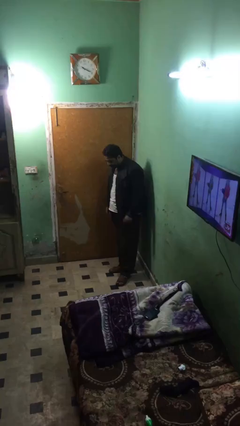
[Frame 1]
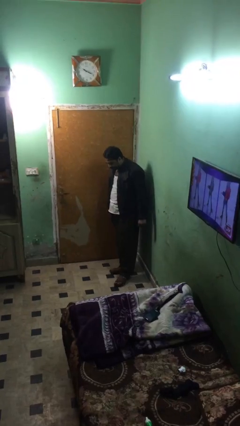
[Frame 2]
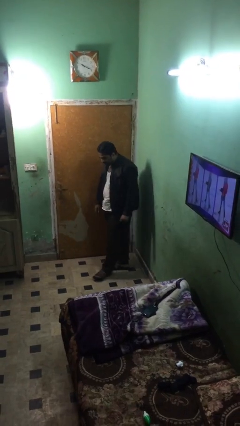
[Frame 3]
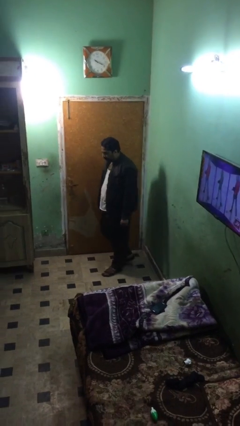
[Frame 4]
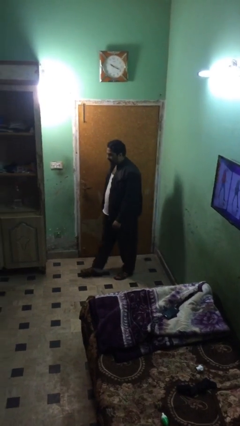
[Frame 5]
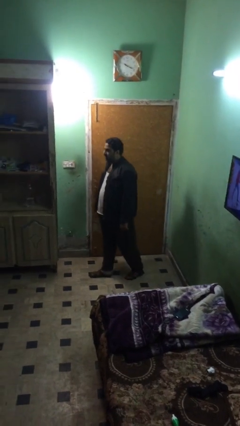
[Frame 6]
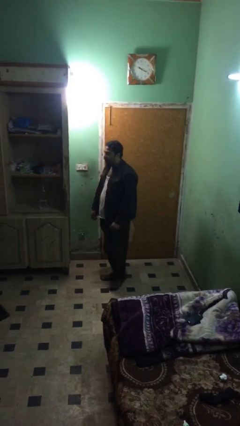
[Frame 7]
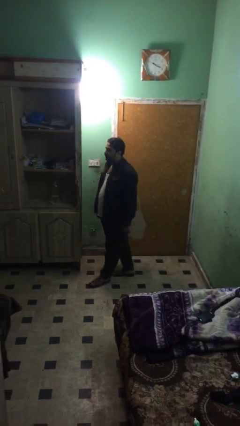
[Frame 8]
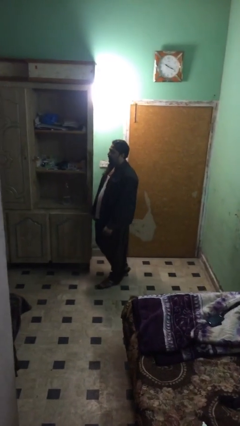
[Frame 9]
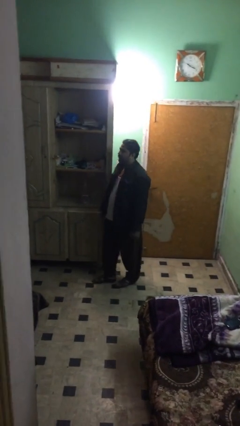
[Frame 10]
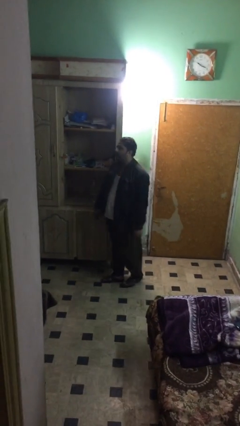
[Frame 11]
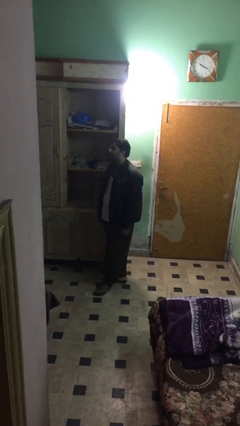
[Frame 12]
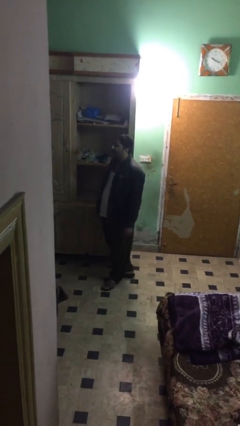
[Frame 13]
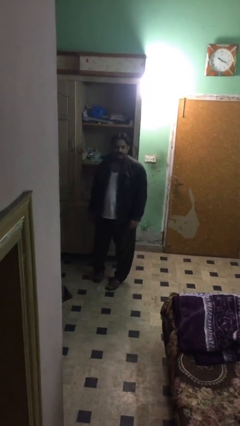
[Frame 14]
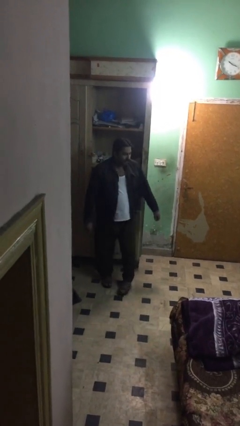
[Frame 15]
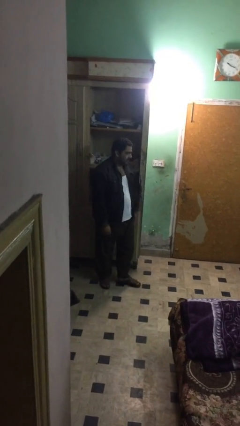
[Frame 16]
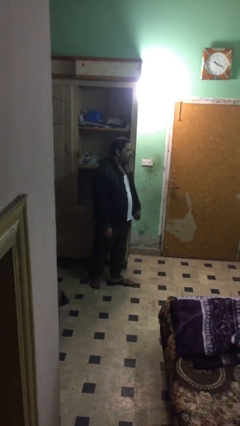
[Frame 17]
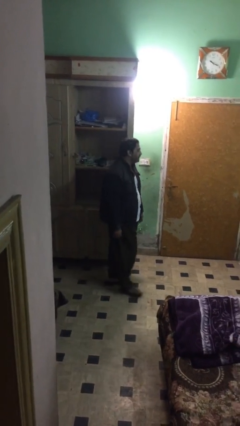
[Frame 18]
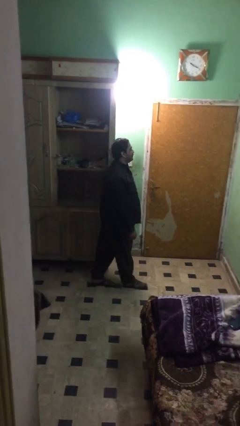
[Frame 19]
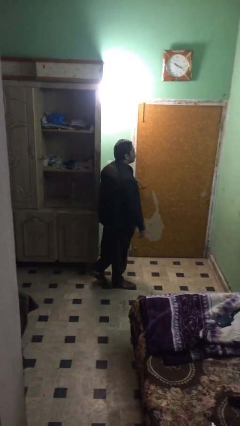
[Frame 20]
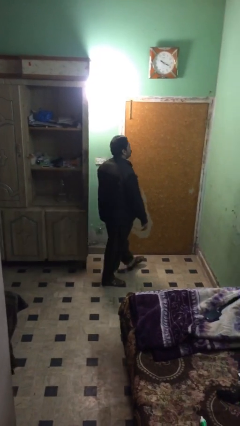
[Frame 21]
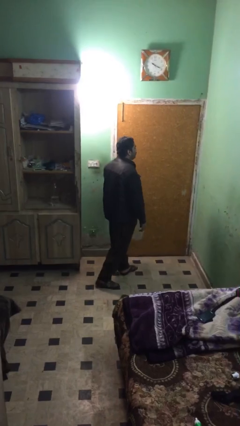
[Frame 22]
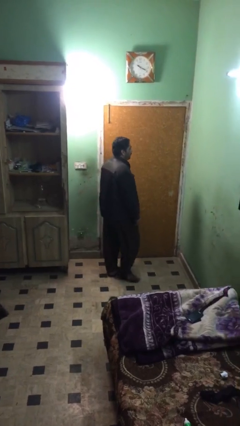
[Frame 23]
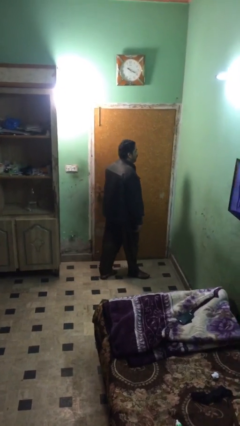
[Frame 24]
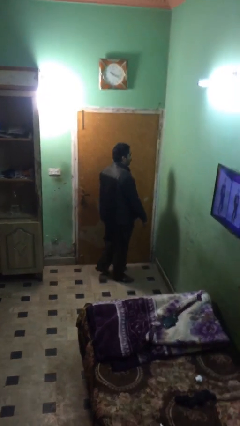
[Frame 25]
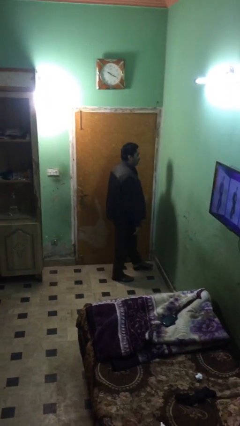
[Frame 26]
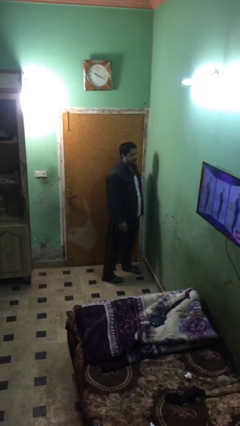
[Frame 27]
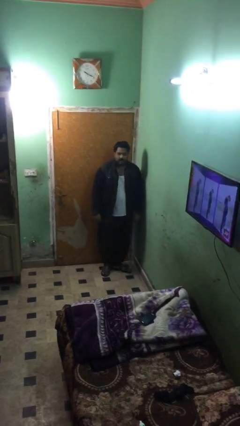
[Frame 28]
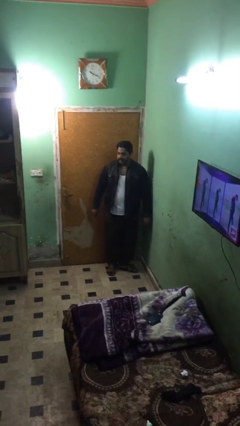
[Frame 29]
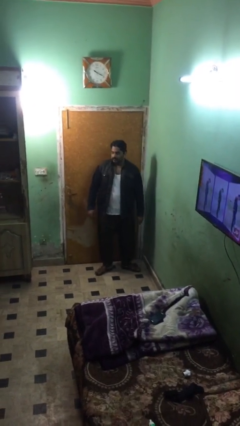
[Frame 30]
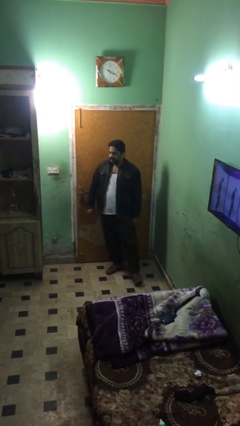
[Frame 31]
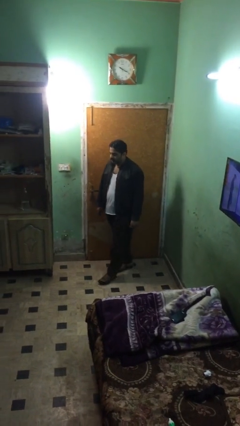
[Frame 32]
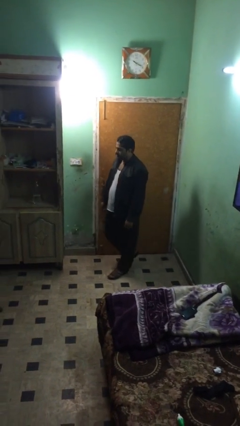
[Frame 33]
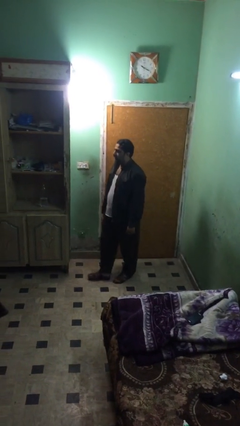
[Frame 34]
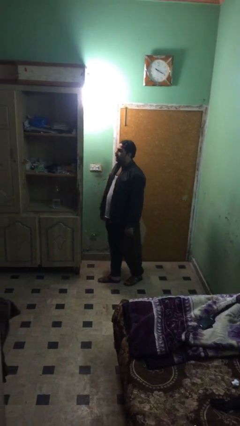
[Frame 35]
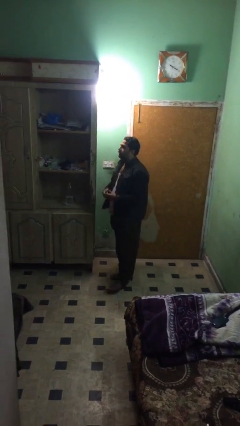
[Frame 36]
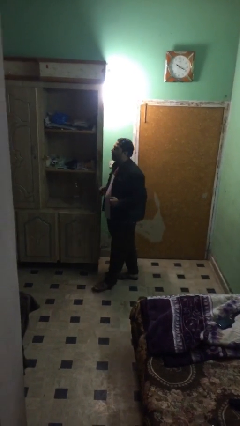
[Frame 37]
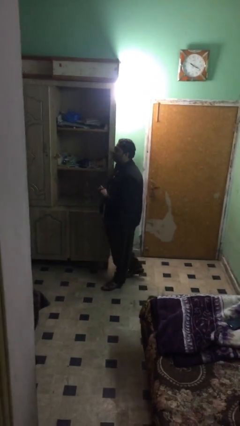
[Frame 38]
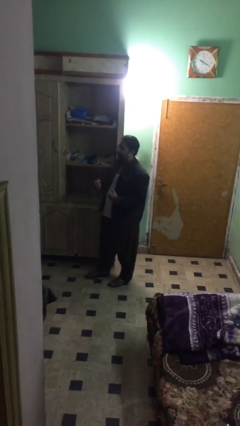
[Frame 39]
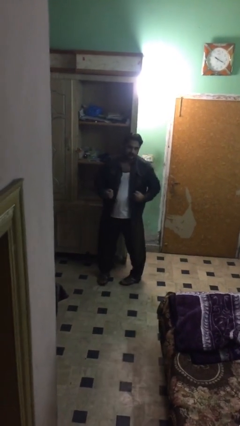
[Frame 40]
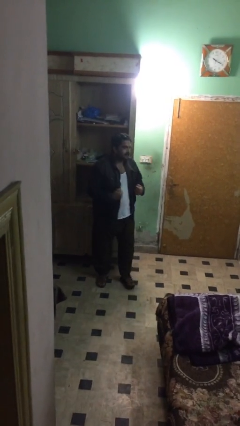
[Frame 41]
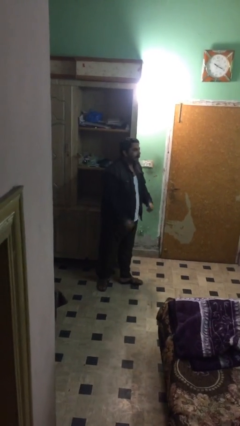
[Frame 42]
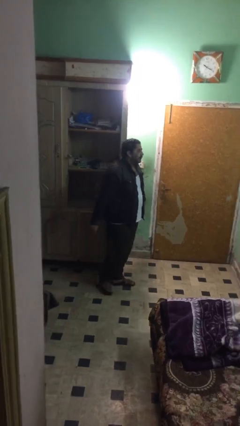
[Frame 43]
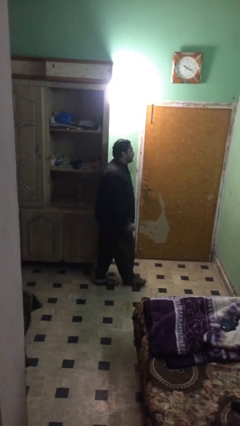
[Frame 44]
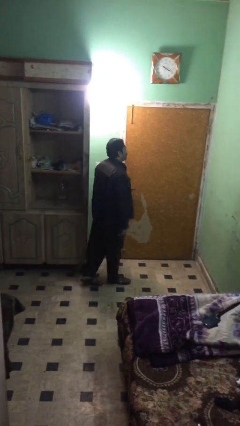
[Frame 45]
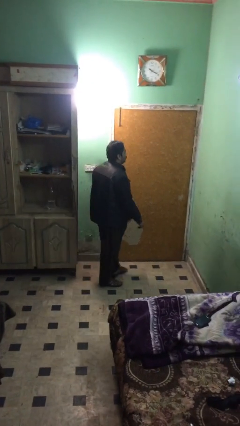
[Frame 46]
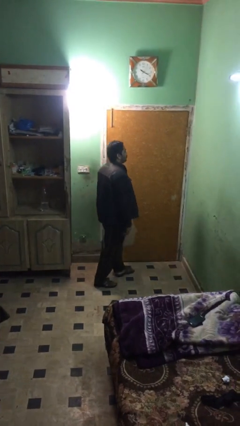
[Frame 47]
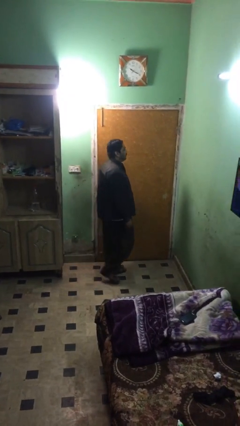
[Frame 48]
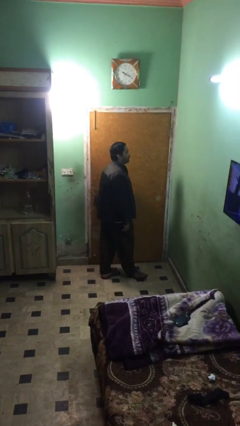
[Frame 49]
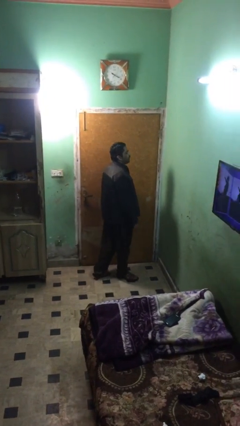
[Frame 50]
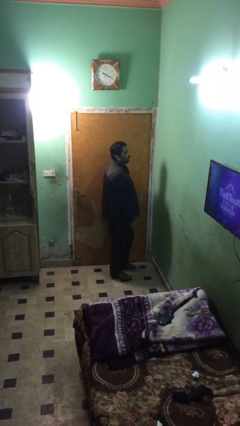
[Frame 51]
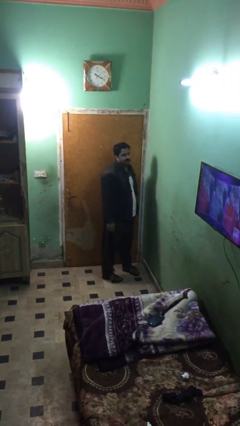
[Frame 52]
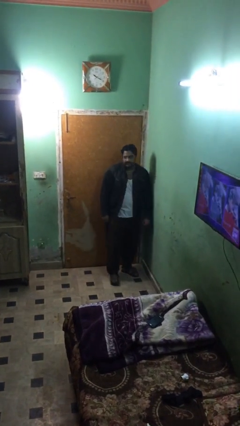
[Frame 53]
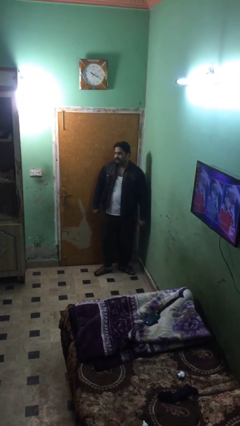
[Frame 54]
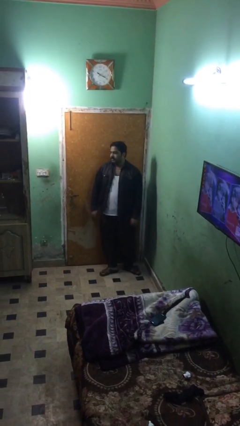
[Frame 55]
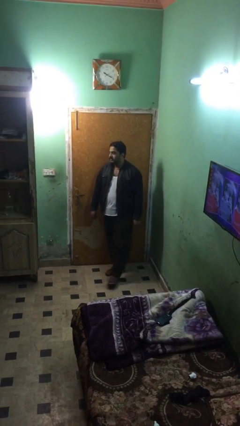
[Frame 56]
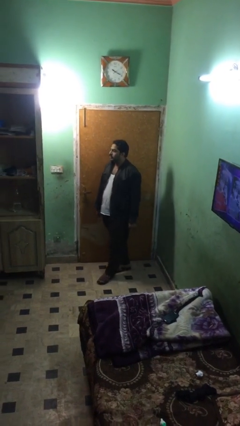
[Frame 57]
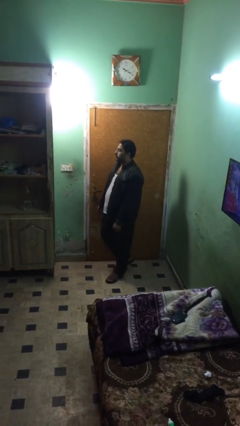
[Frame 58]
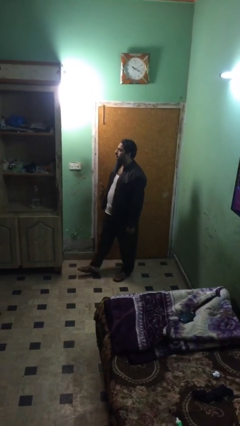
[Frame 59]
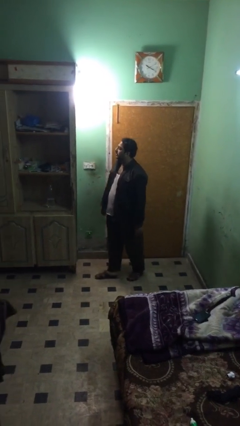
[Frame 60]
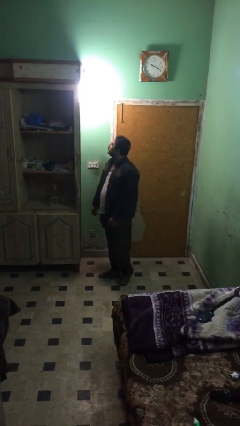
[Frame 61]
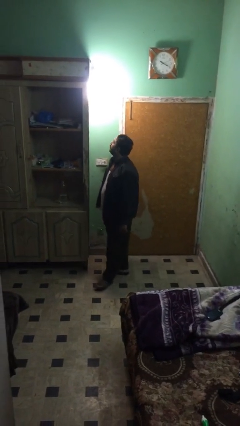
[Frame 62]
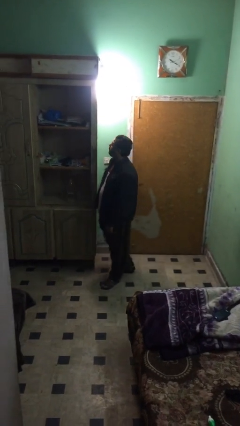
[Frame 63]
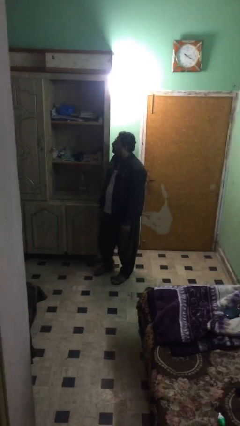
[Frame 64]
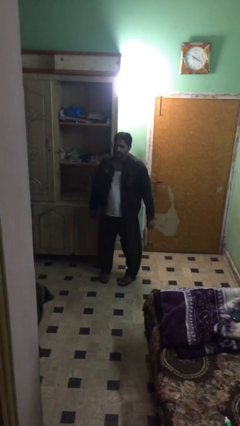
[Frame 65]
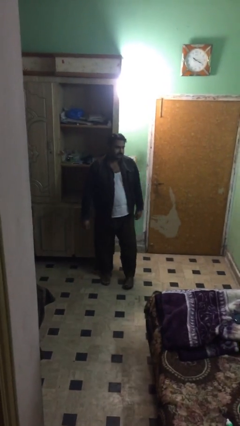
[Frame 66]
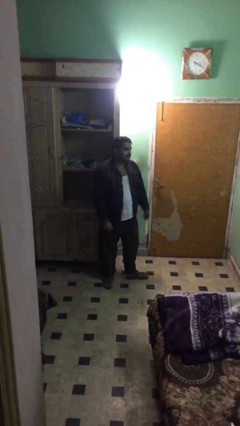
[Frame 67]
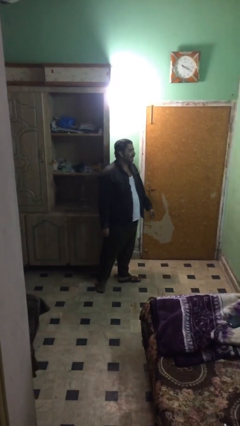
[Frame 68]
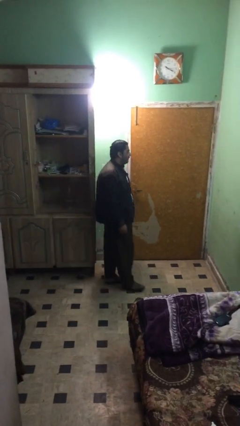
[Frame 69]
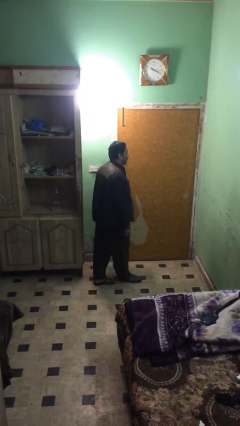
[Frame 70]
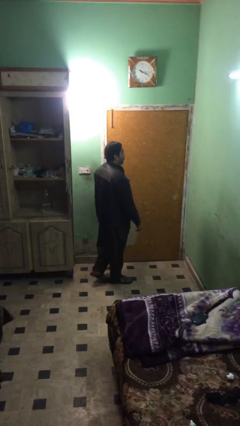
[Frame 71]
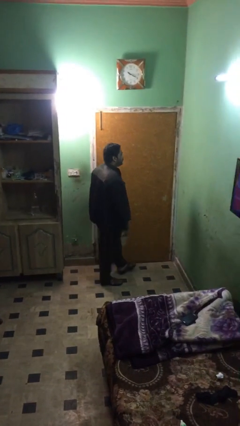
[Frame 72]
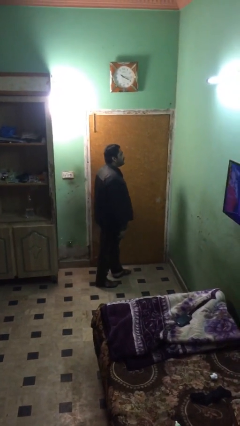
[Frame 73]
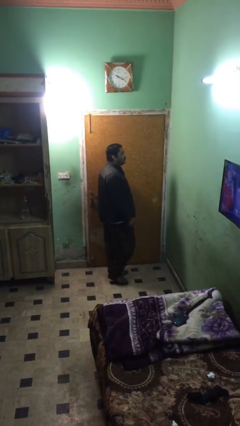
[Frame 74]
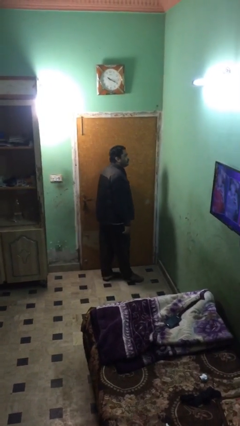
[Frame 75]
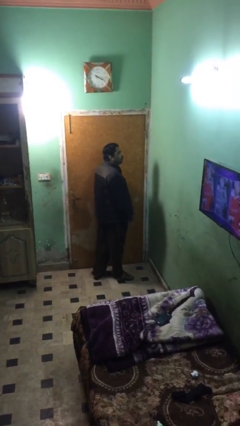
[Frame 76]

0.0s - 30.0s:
person walks

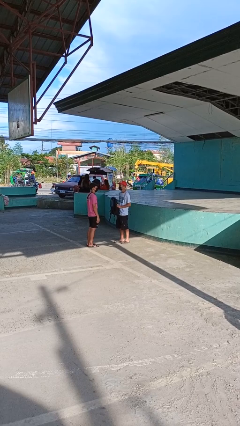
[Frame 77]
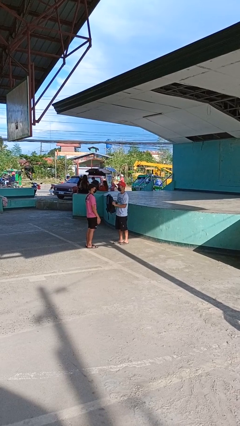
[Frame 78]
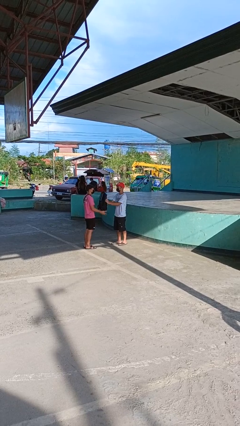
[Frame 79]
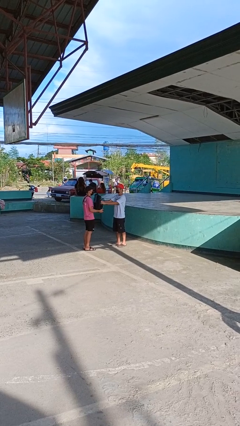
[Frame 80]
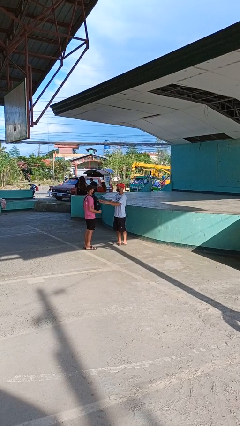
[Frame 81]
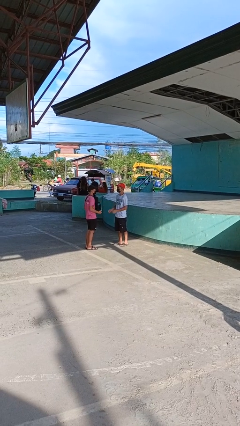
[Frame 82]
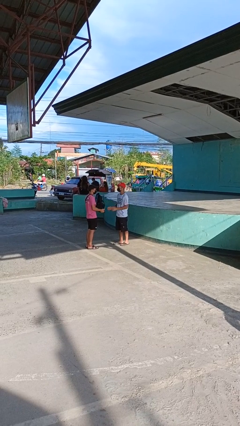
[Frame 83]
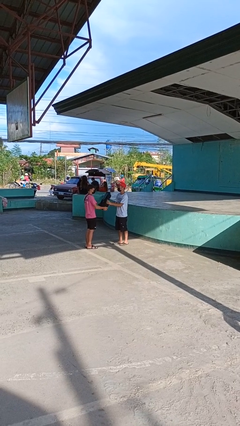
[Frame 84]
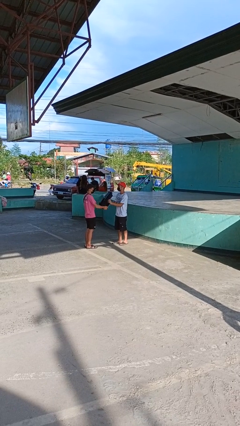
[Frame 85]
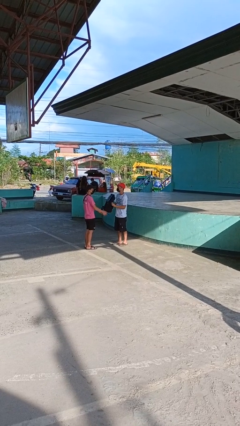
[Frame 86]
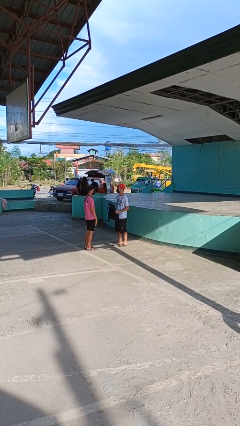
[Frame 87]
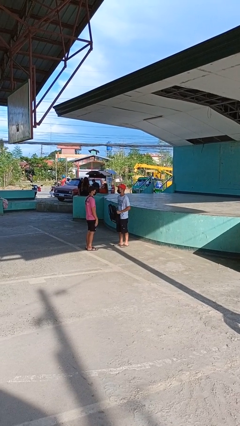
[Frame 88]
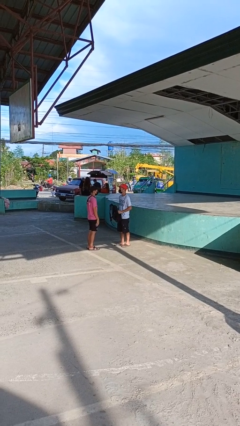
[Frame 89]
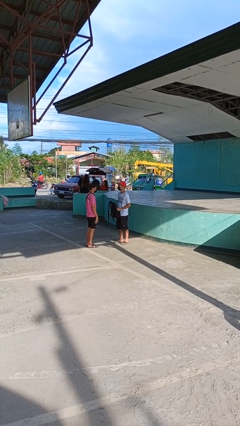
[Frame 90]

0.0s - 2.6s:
person transfers object to person

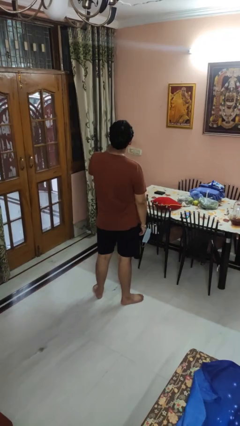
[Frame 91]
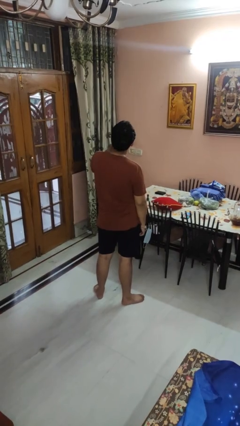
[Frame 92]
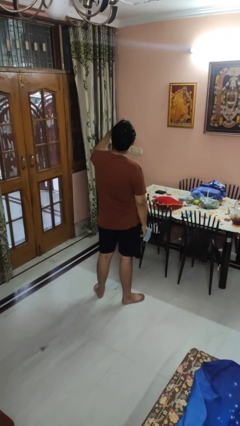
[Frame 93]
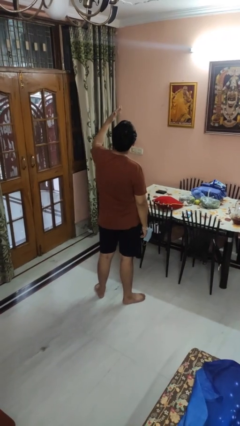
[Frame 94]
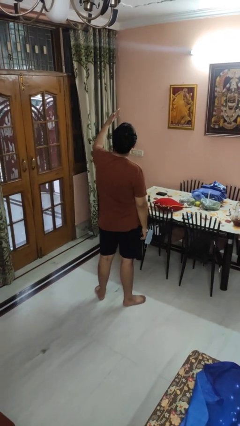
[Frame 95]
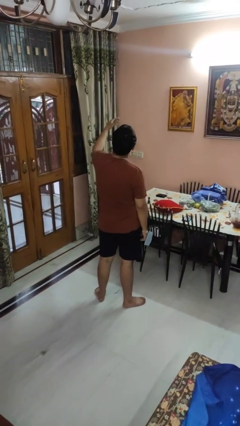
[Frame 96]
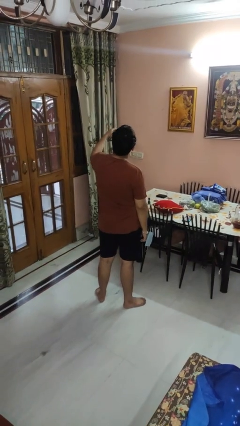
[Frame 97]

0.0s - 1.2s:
person gestures blow kiss
